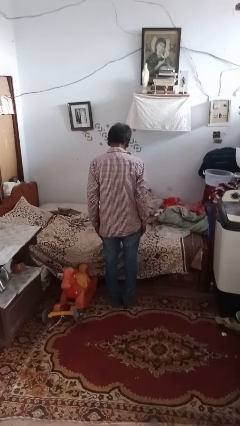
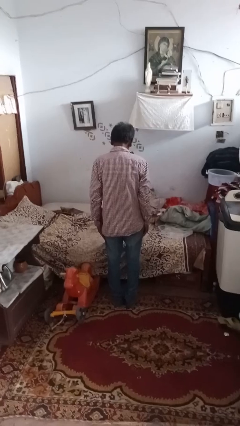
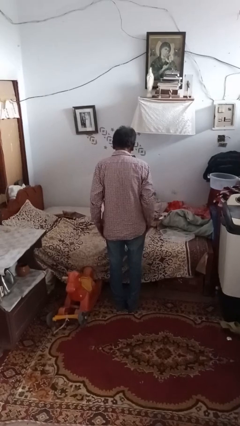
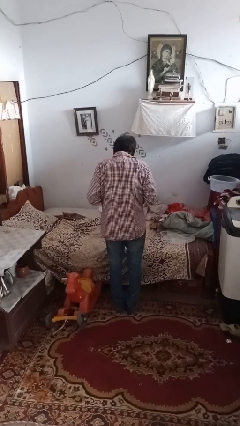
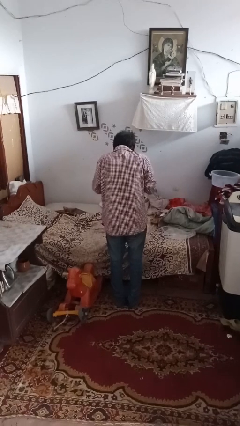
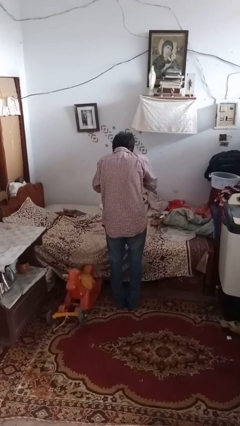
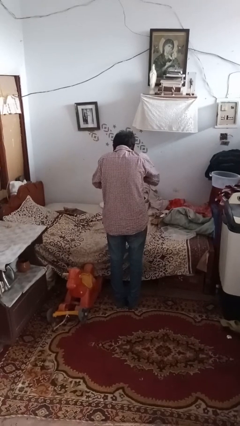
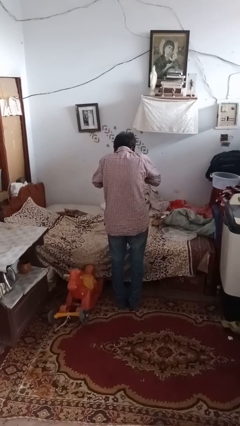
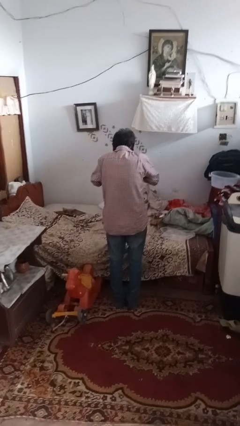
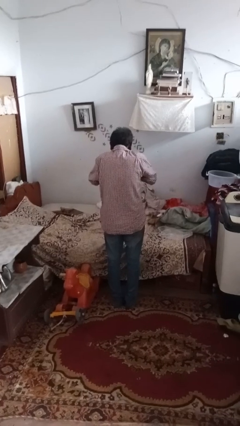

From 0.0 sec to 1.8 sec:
person sneezes into hand

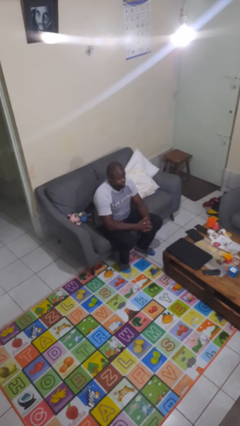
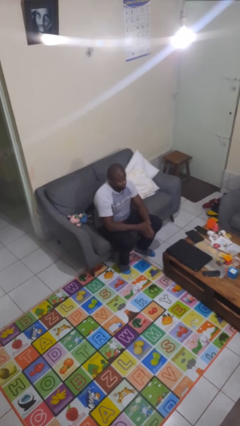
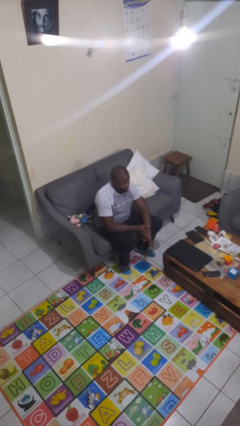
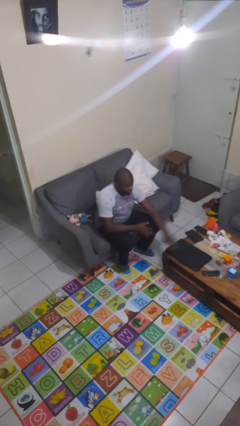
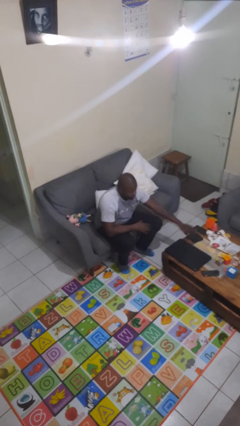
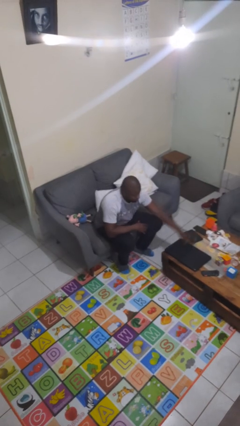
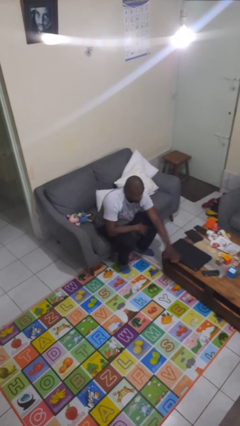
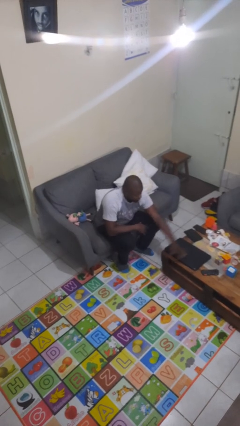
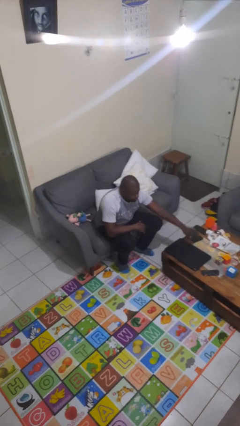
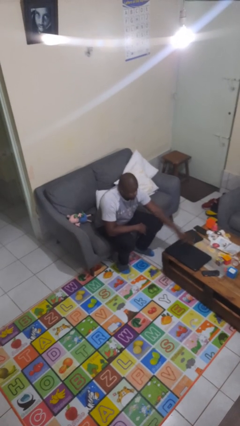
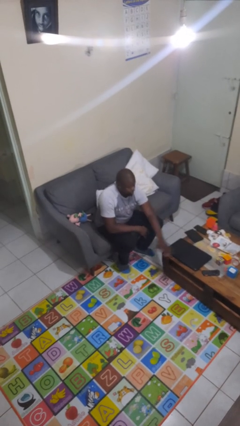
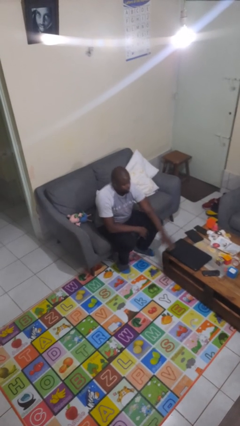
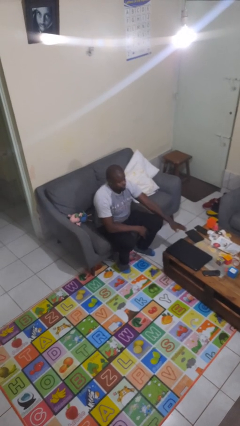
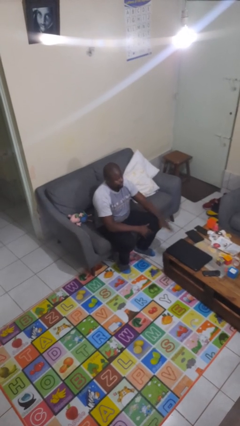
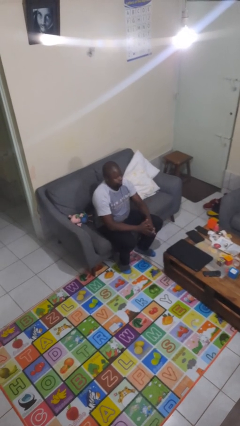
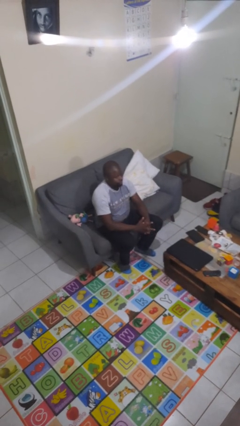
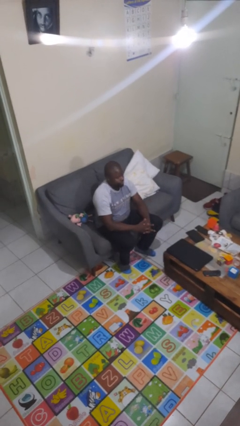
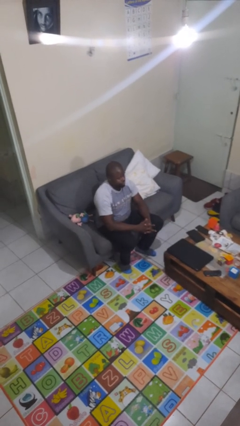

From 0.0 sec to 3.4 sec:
person waves hand over object

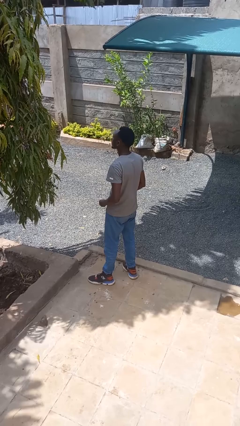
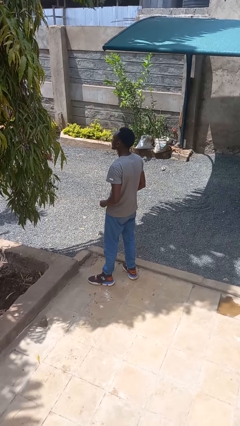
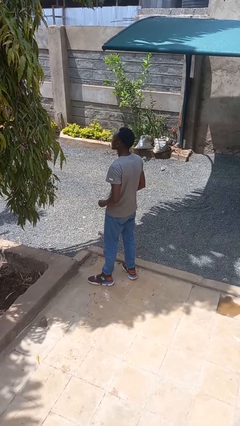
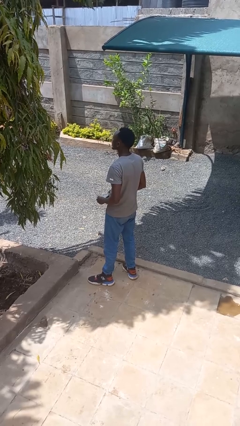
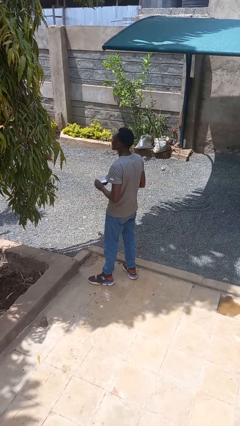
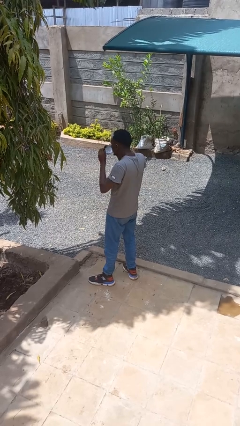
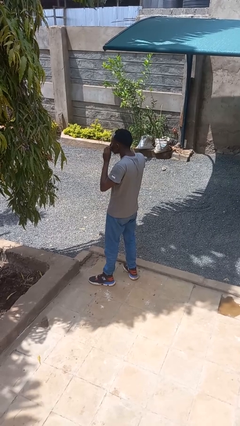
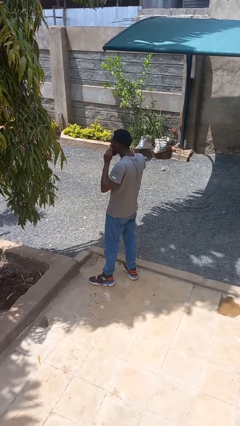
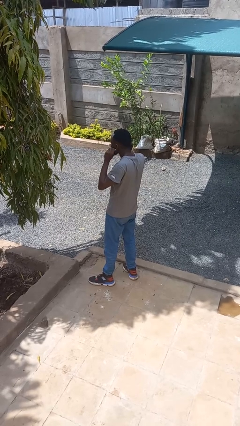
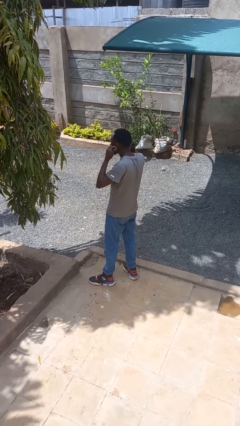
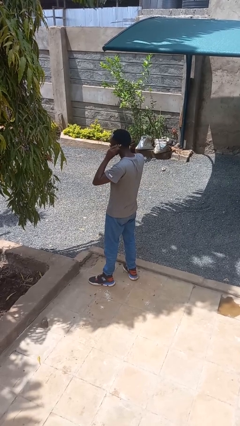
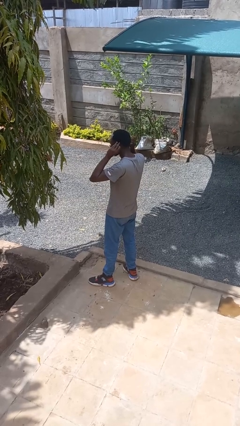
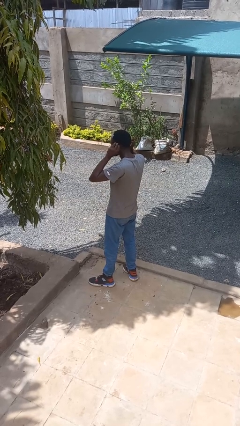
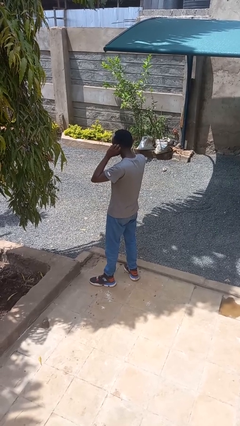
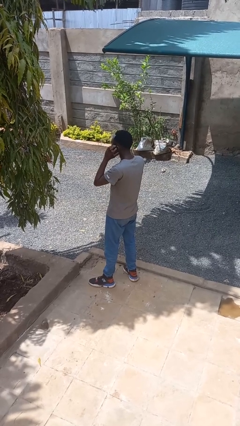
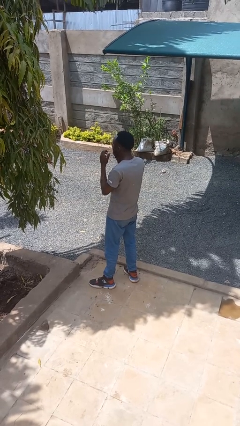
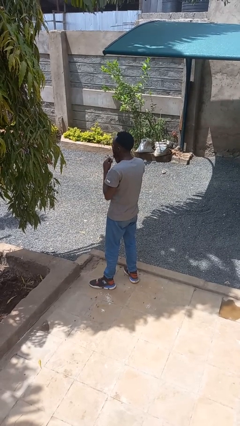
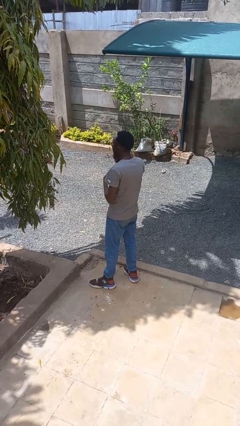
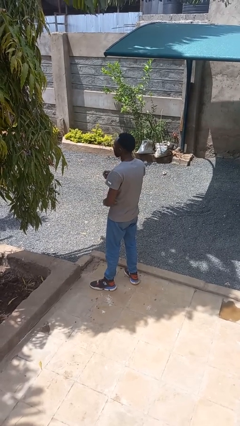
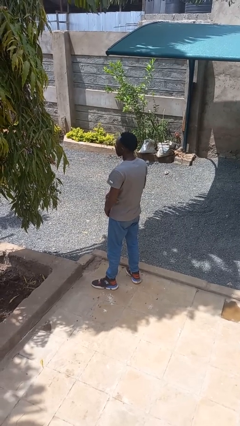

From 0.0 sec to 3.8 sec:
person puts on facemask

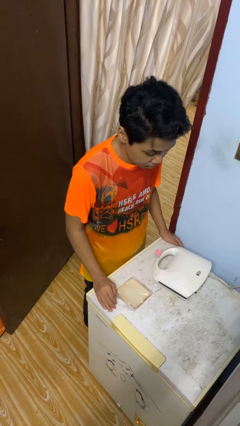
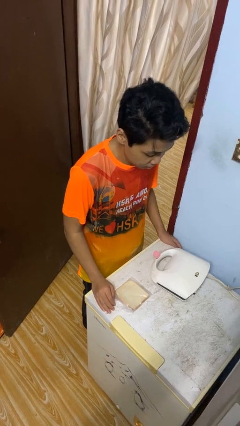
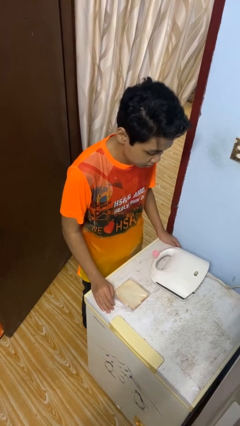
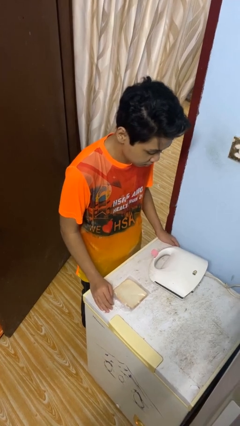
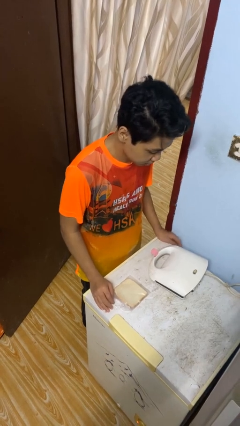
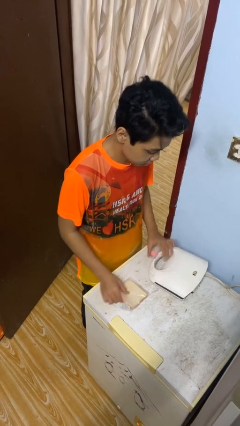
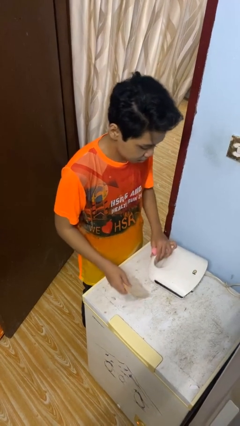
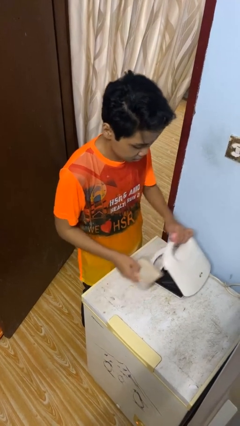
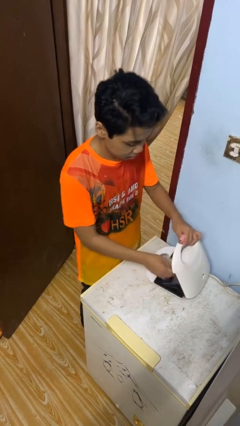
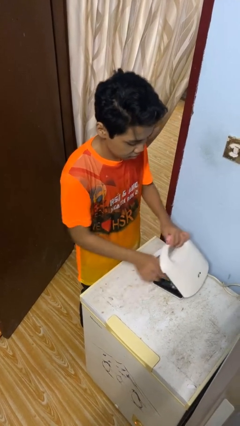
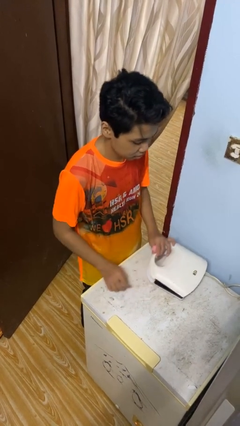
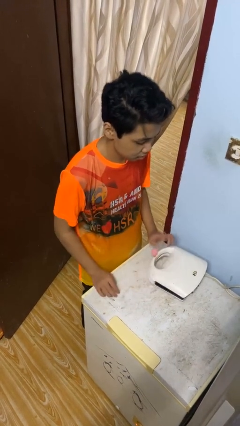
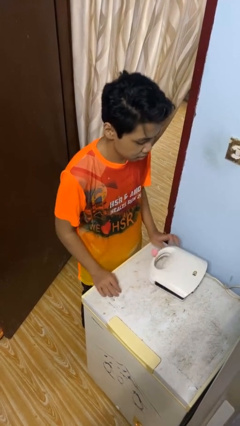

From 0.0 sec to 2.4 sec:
person puts object into toaster

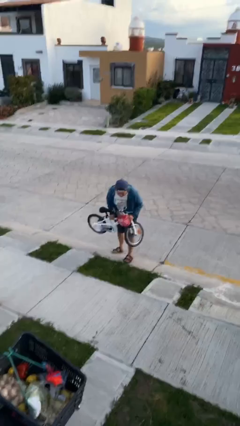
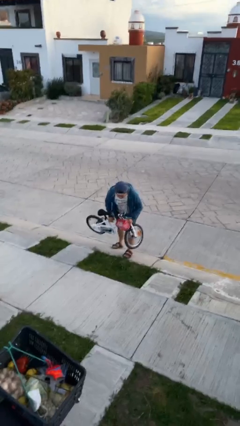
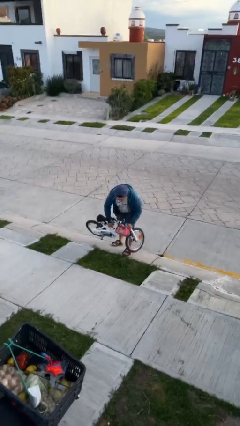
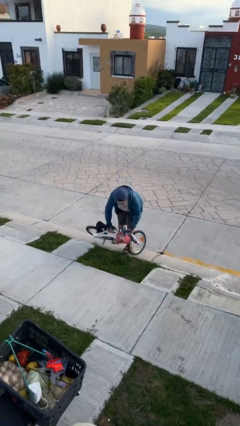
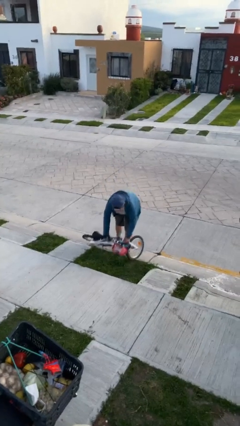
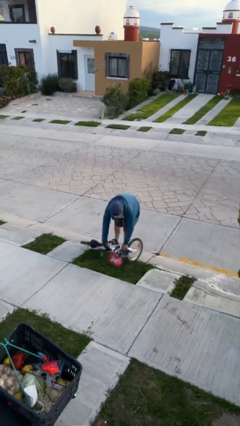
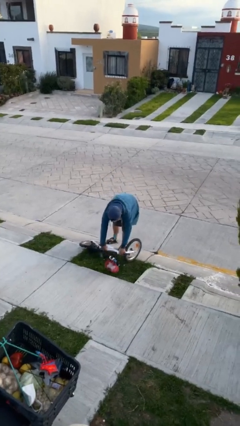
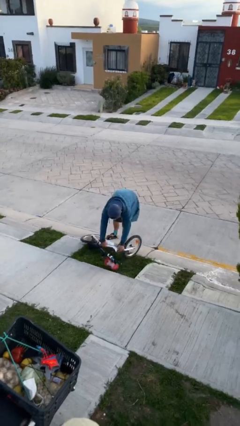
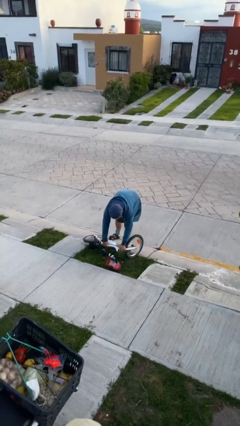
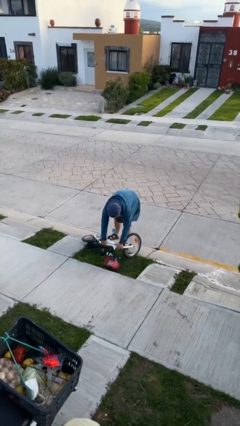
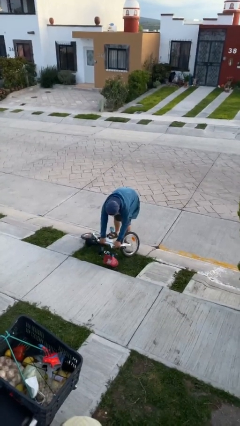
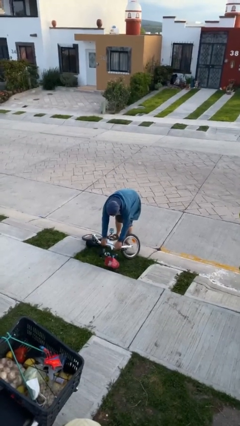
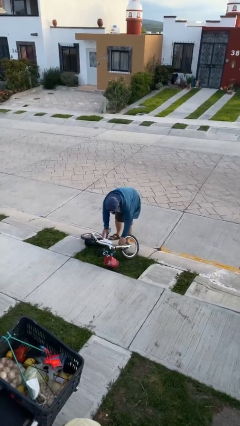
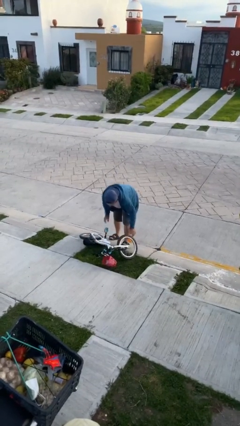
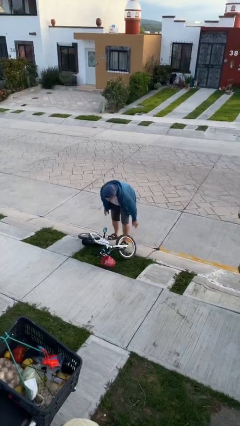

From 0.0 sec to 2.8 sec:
person puts down object on floor

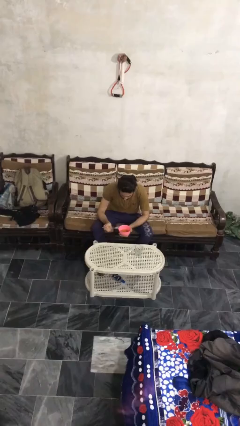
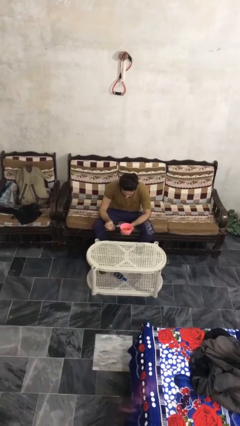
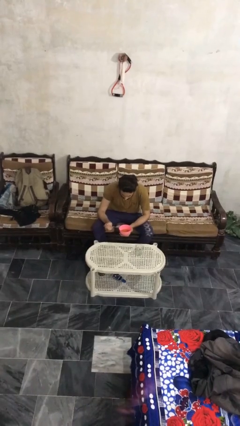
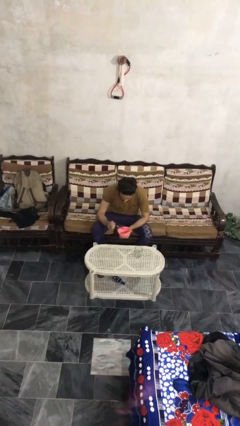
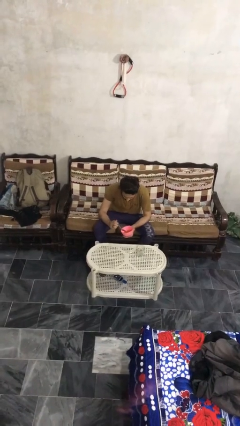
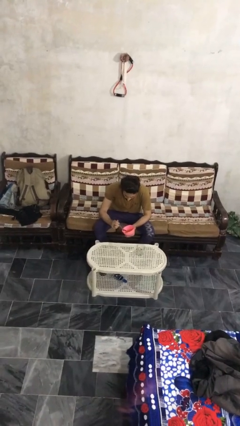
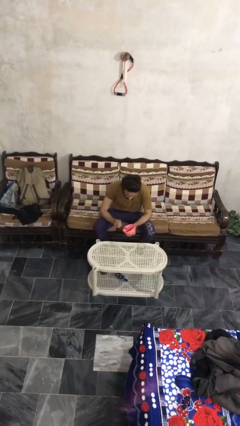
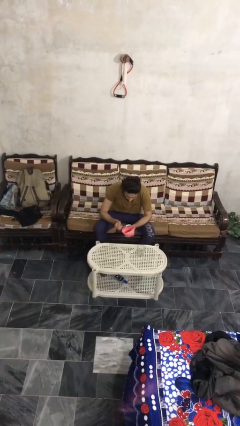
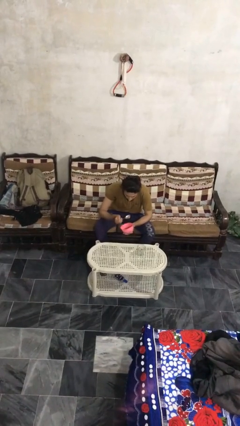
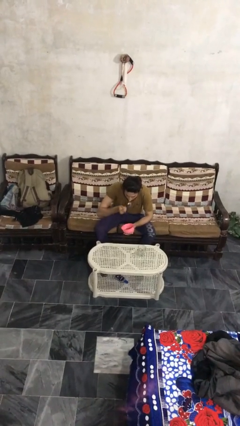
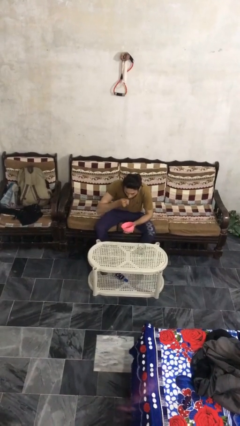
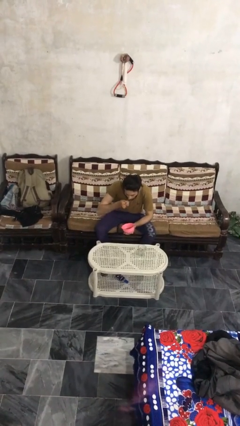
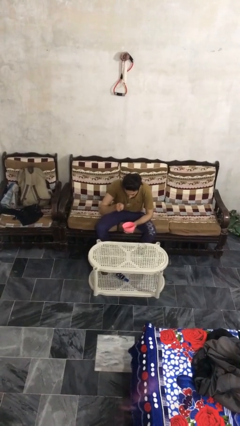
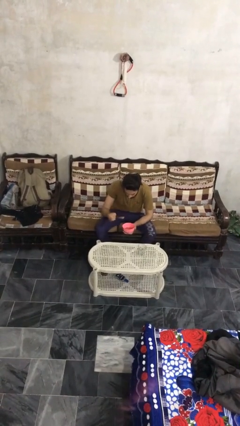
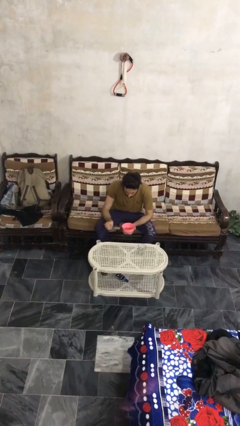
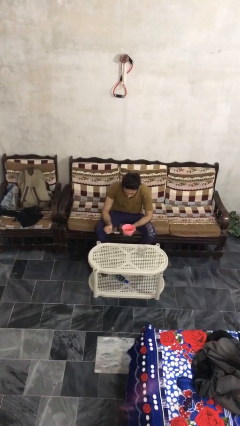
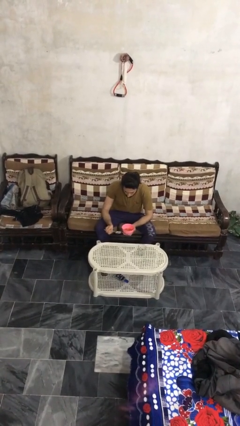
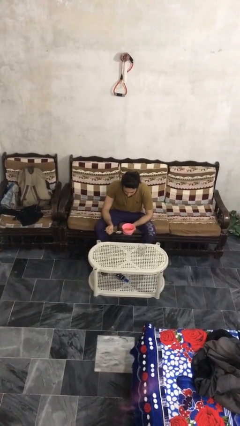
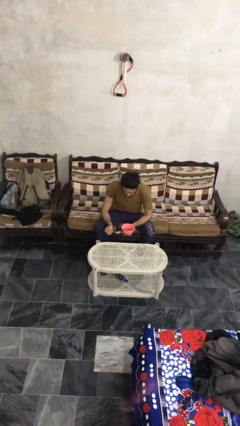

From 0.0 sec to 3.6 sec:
person eats with utensil
